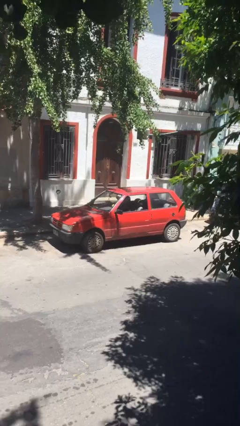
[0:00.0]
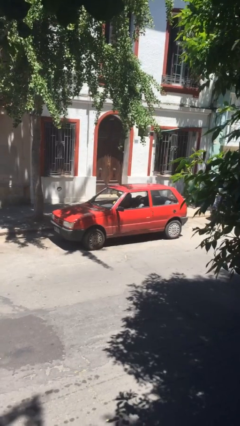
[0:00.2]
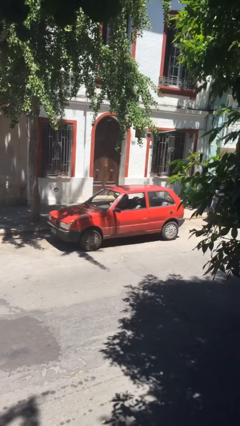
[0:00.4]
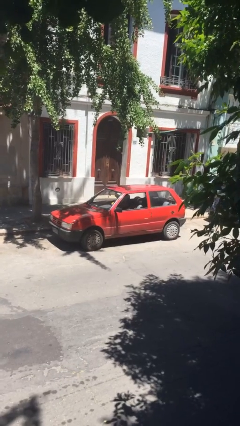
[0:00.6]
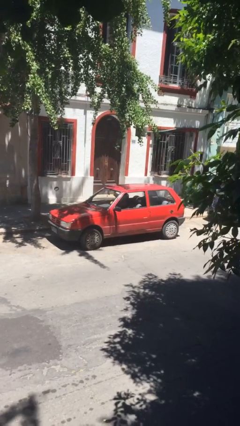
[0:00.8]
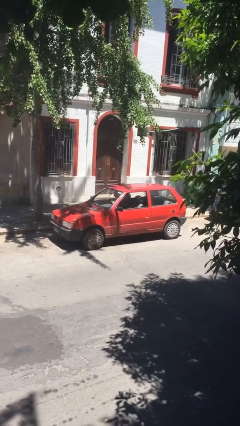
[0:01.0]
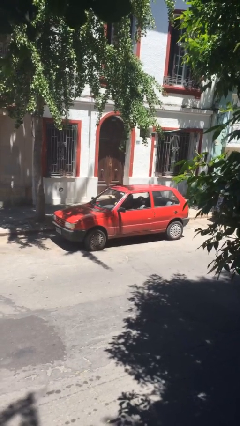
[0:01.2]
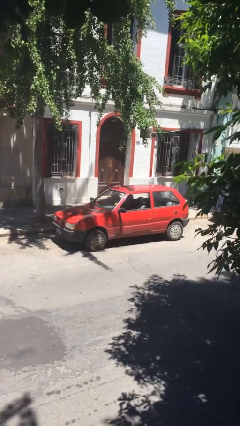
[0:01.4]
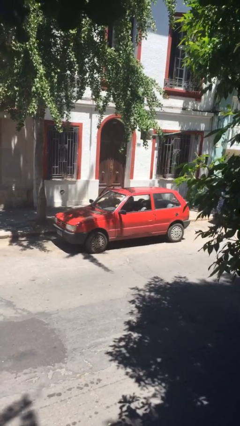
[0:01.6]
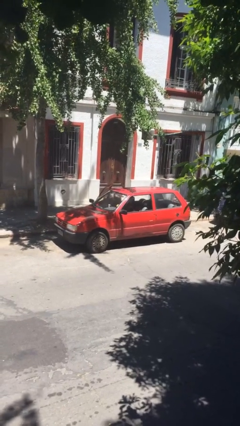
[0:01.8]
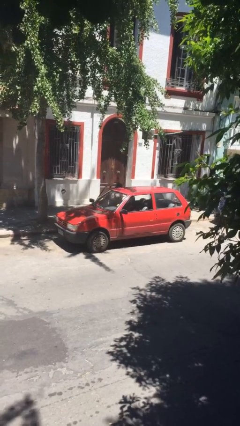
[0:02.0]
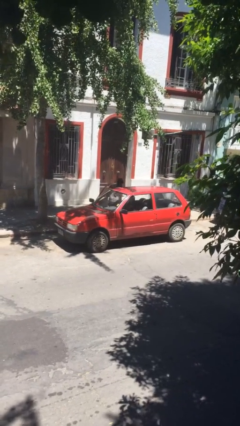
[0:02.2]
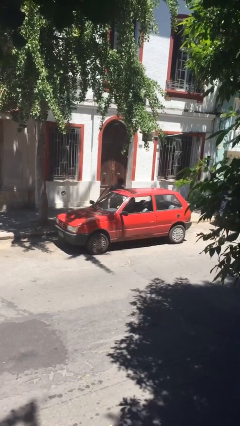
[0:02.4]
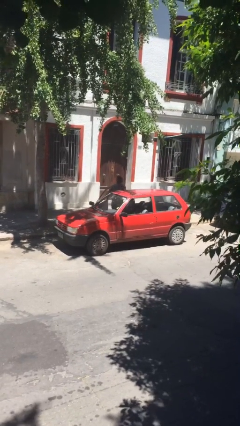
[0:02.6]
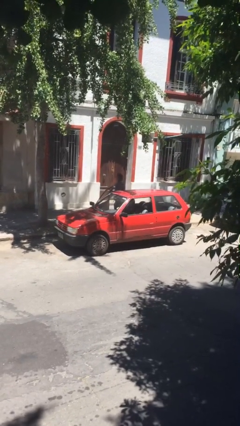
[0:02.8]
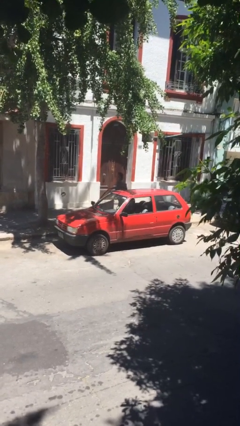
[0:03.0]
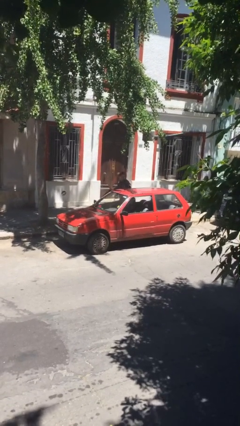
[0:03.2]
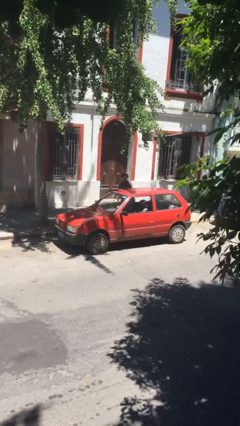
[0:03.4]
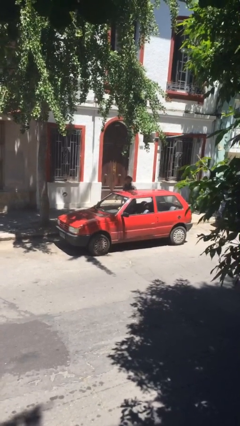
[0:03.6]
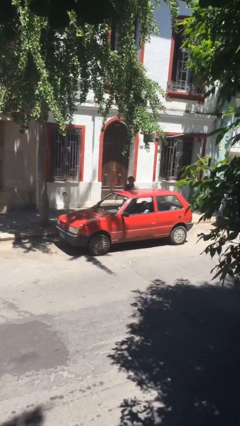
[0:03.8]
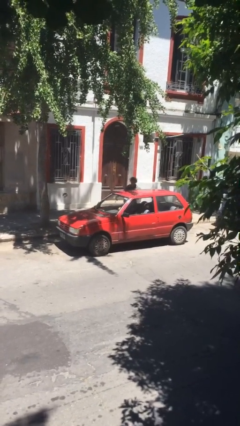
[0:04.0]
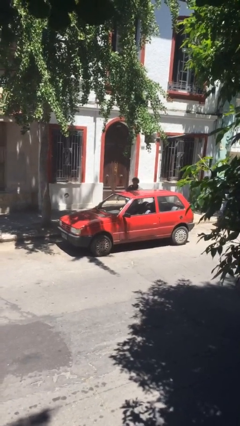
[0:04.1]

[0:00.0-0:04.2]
car drops off person

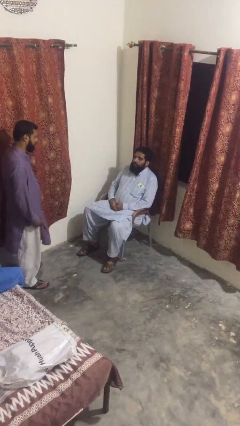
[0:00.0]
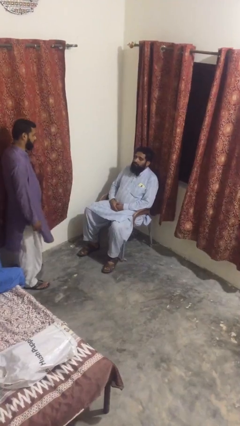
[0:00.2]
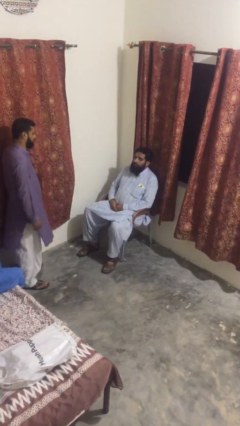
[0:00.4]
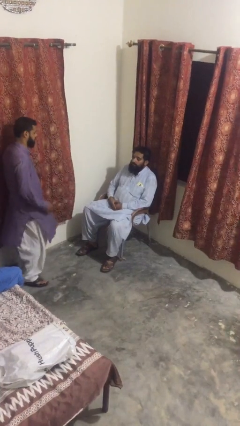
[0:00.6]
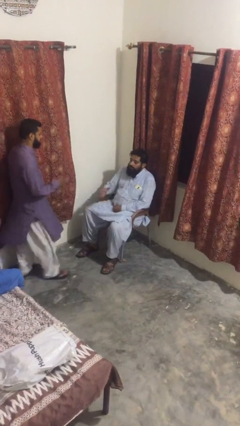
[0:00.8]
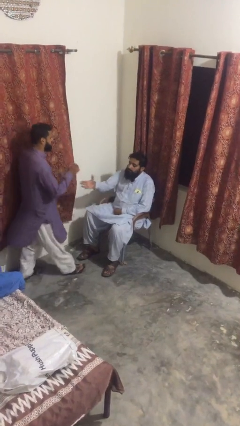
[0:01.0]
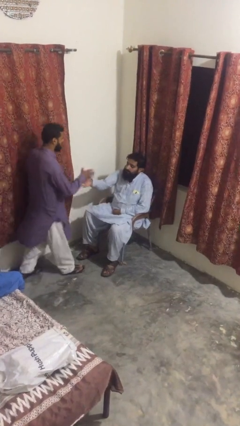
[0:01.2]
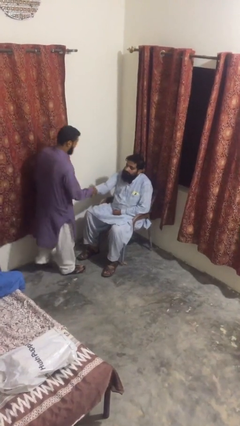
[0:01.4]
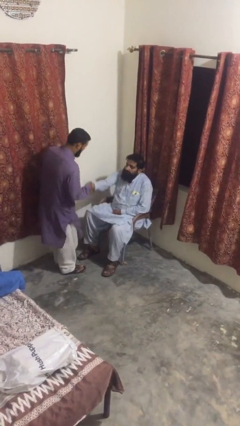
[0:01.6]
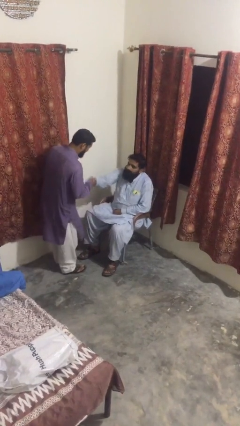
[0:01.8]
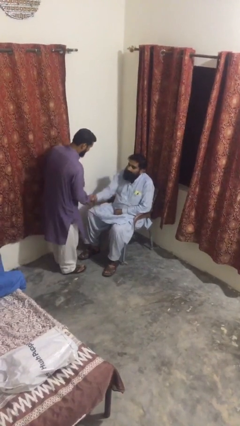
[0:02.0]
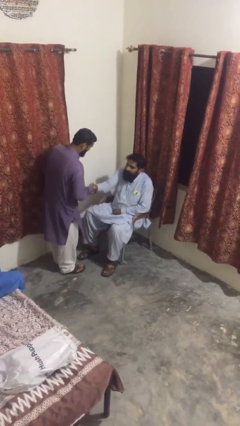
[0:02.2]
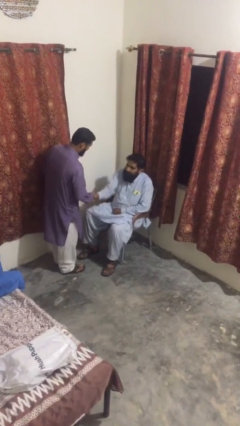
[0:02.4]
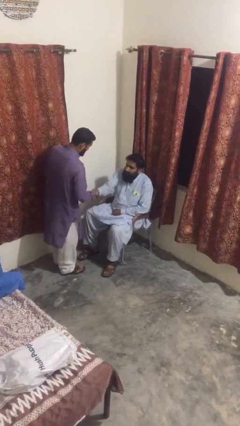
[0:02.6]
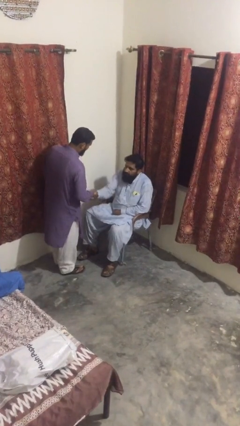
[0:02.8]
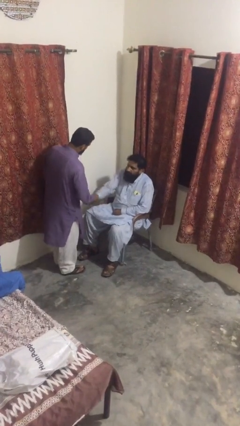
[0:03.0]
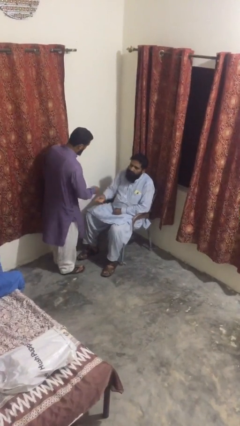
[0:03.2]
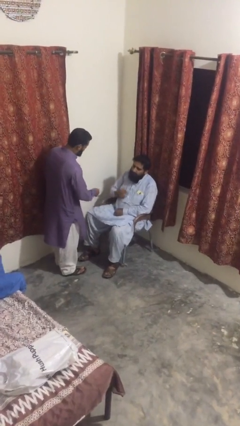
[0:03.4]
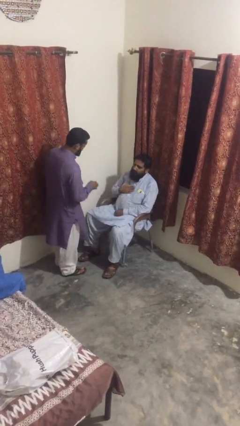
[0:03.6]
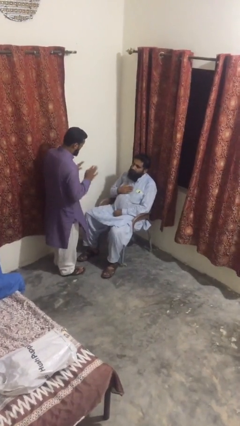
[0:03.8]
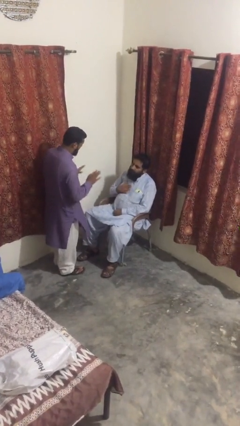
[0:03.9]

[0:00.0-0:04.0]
person shakes hand

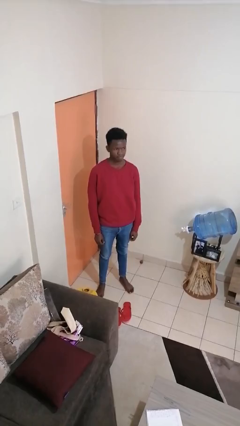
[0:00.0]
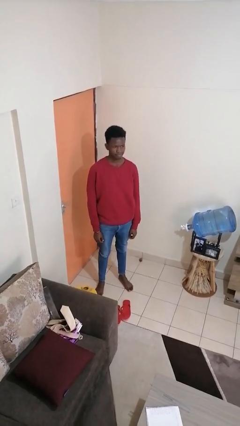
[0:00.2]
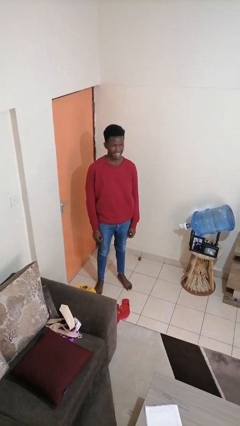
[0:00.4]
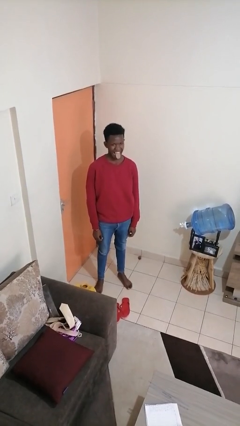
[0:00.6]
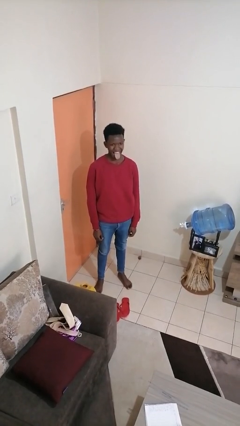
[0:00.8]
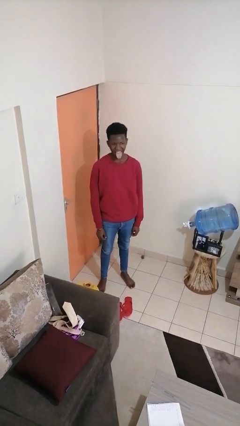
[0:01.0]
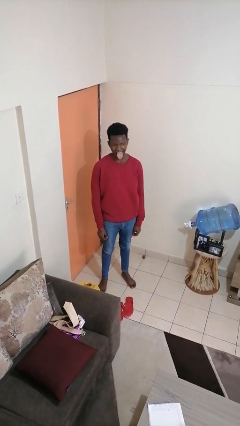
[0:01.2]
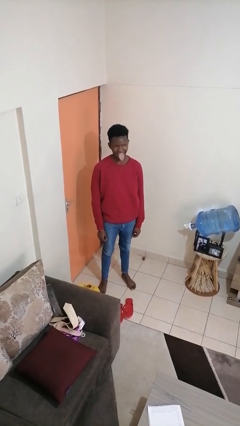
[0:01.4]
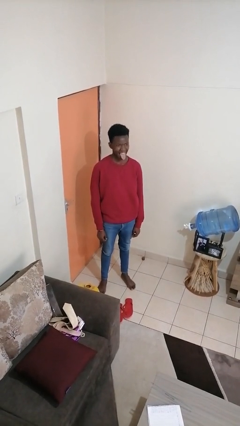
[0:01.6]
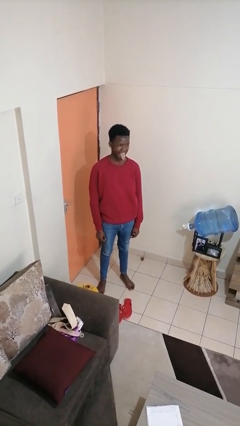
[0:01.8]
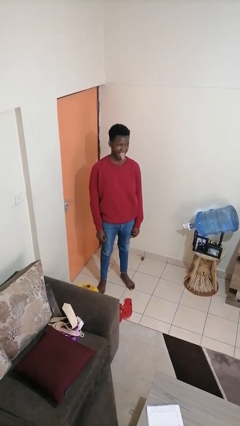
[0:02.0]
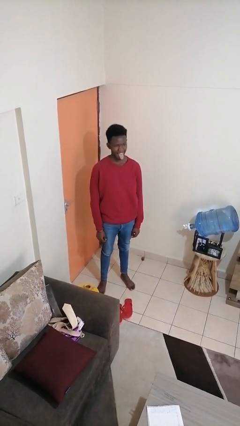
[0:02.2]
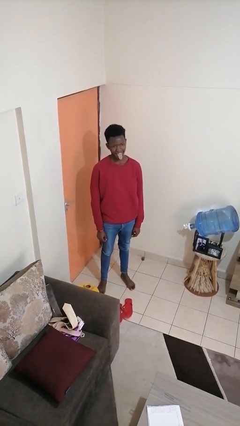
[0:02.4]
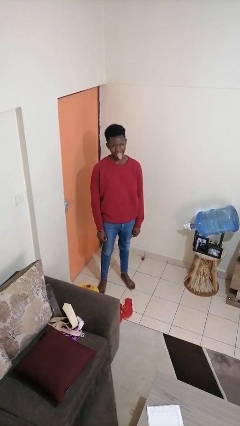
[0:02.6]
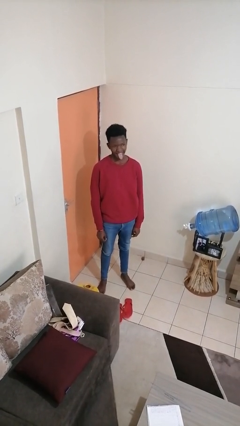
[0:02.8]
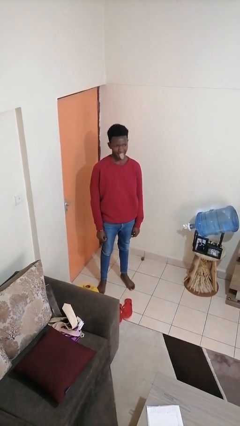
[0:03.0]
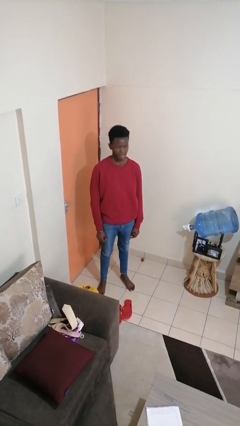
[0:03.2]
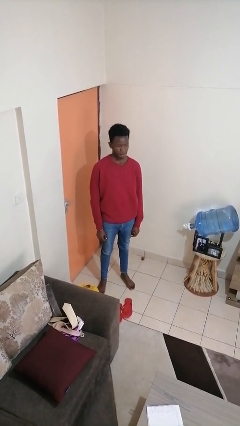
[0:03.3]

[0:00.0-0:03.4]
person sticks out tongue

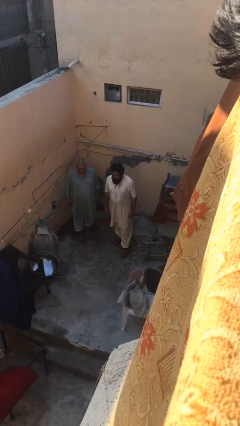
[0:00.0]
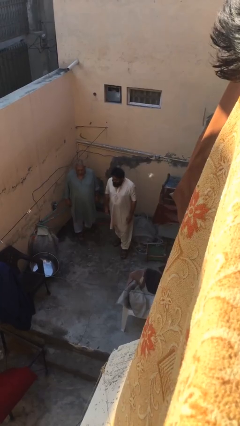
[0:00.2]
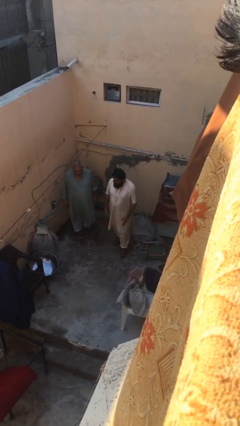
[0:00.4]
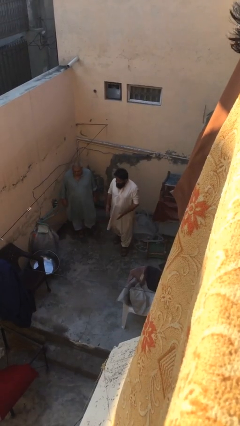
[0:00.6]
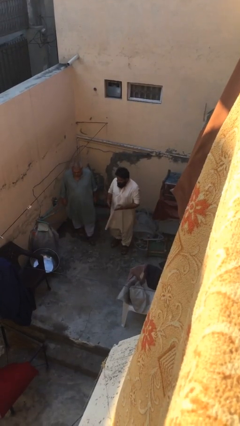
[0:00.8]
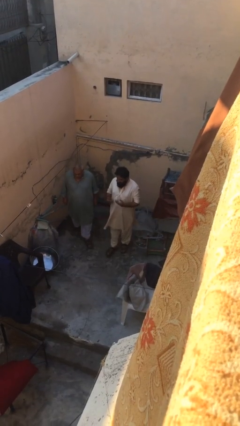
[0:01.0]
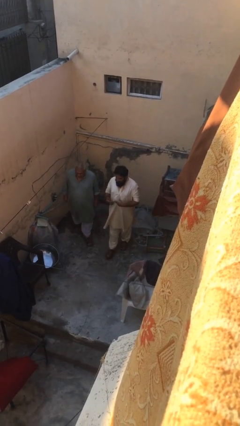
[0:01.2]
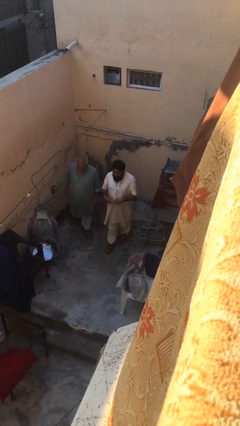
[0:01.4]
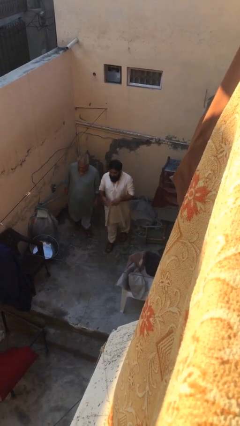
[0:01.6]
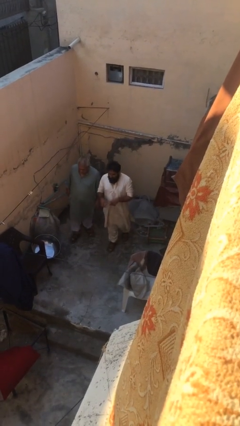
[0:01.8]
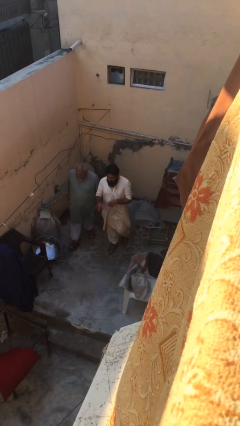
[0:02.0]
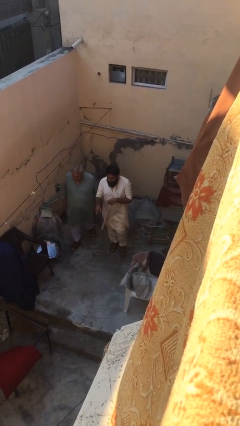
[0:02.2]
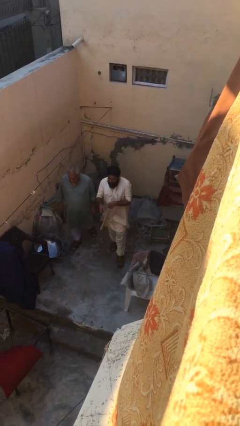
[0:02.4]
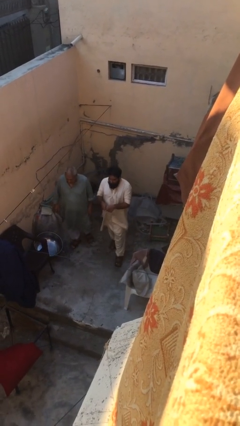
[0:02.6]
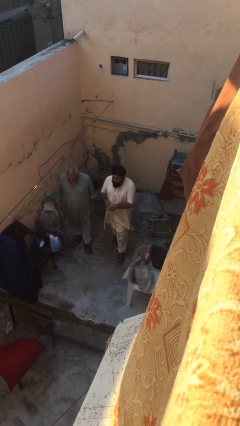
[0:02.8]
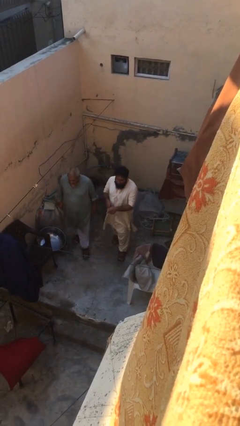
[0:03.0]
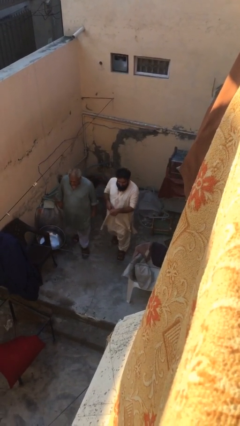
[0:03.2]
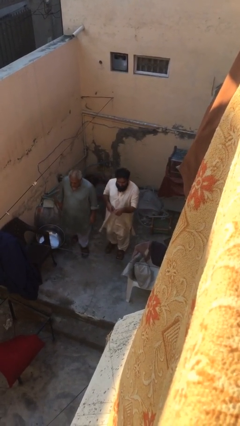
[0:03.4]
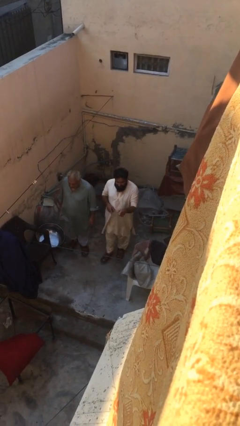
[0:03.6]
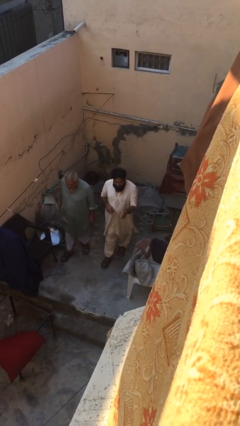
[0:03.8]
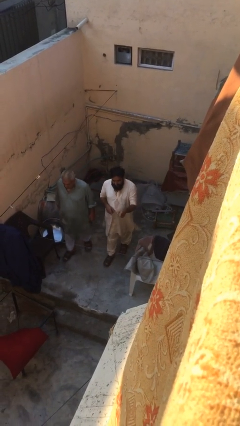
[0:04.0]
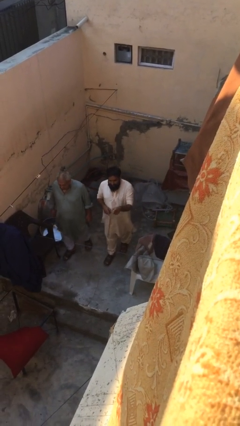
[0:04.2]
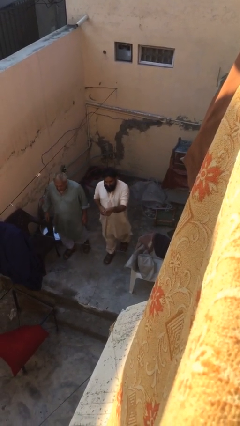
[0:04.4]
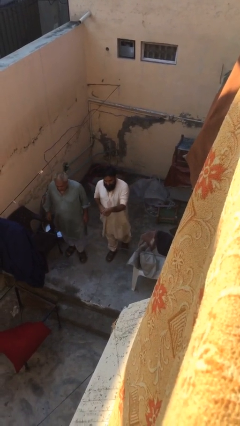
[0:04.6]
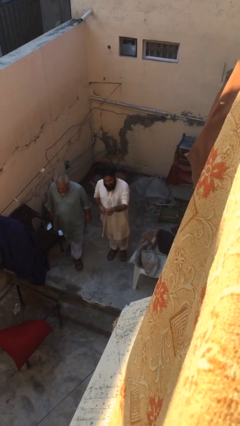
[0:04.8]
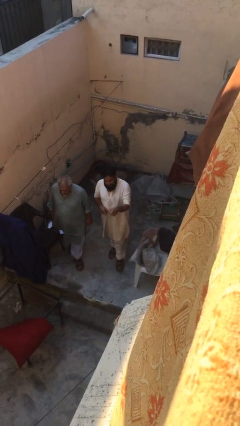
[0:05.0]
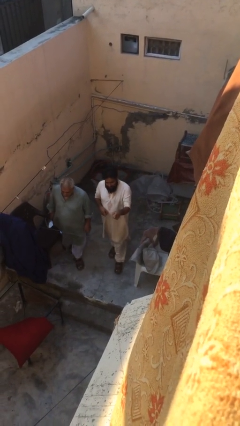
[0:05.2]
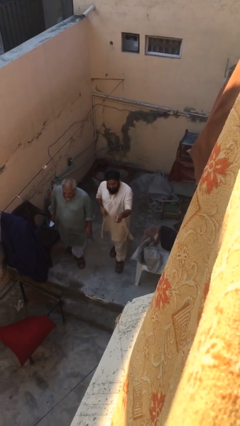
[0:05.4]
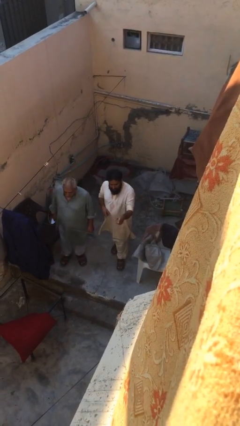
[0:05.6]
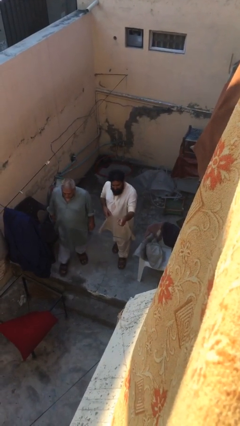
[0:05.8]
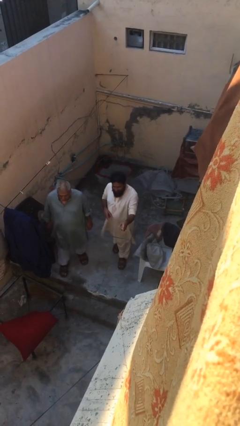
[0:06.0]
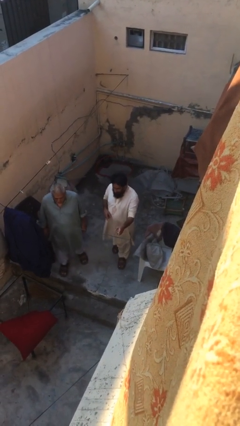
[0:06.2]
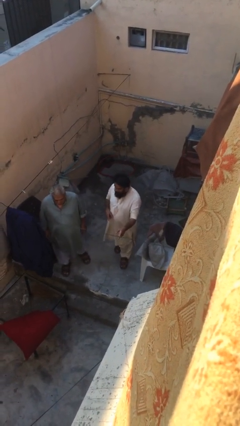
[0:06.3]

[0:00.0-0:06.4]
person talks to person
